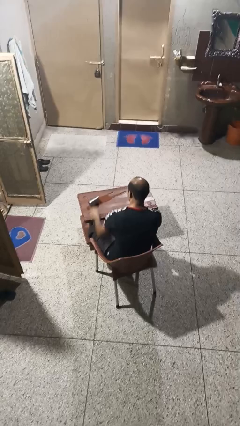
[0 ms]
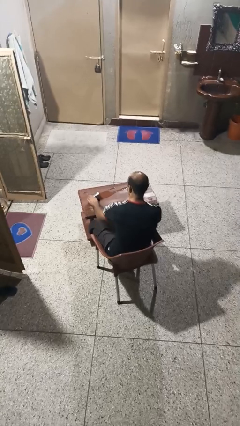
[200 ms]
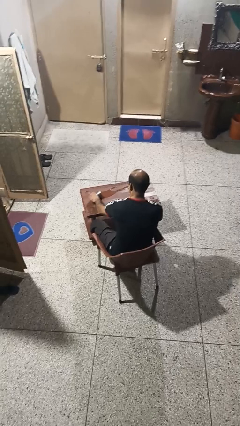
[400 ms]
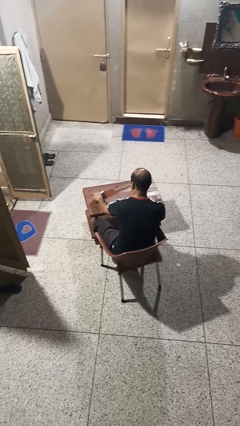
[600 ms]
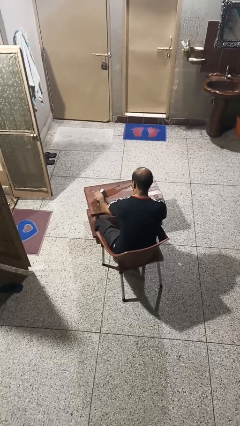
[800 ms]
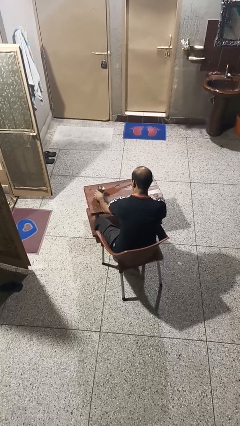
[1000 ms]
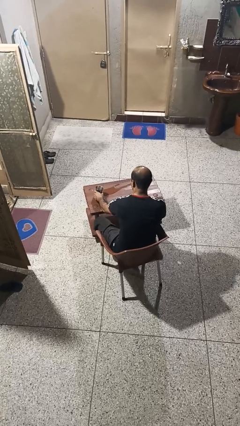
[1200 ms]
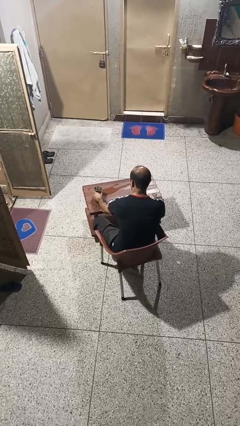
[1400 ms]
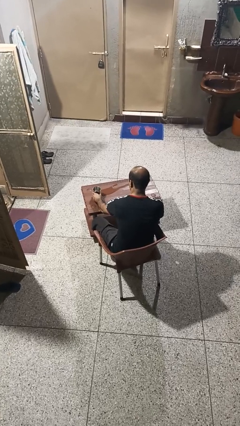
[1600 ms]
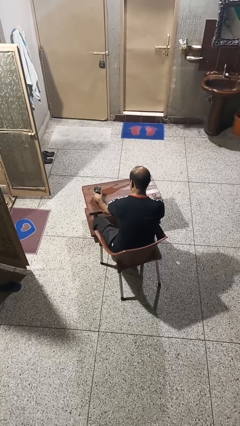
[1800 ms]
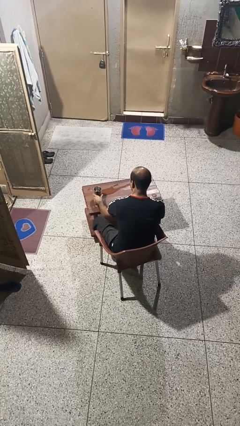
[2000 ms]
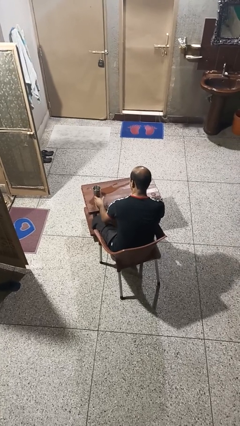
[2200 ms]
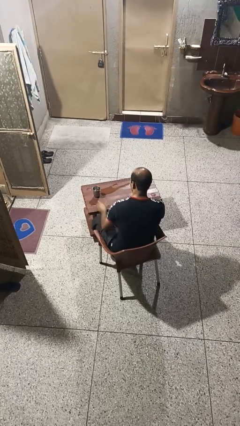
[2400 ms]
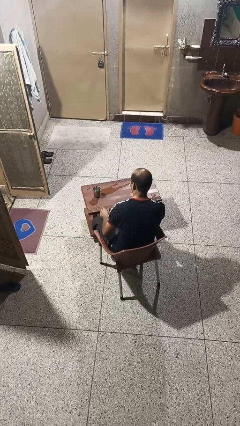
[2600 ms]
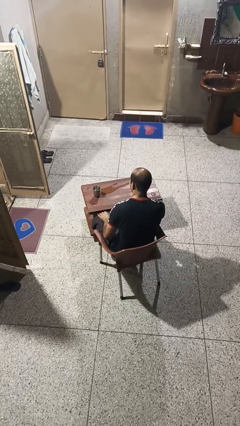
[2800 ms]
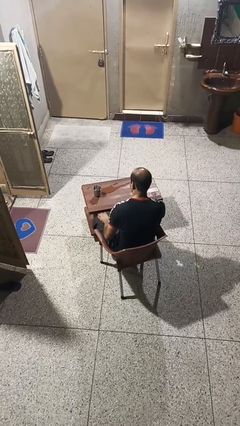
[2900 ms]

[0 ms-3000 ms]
person sets upright glass

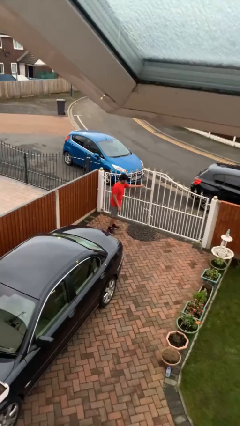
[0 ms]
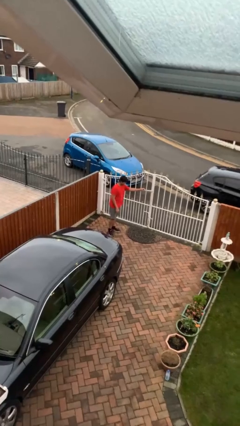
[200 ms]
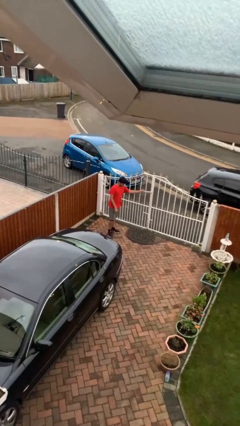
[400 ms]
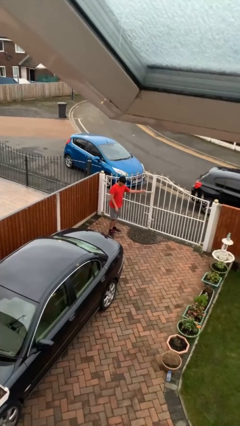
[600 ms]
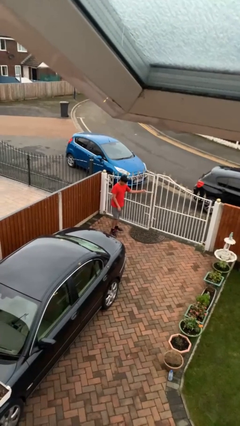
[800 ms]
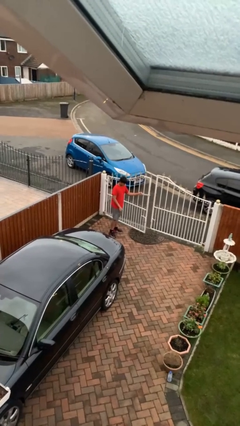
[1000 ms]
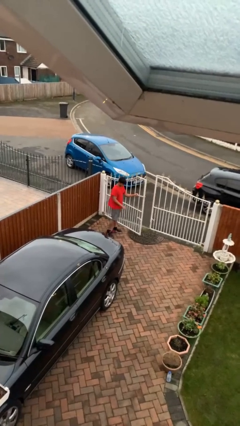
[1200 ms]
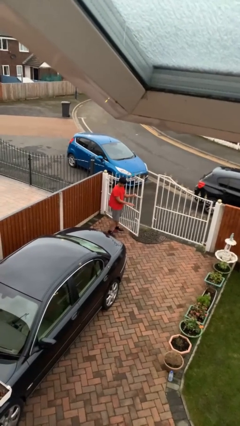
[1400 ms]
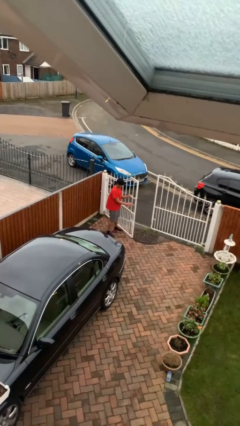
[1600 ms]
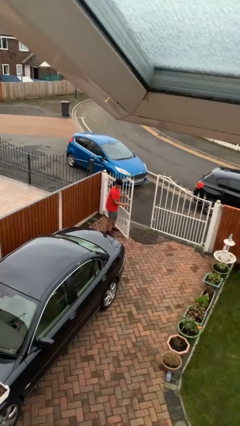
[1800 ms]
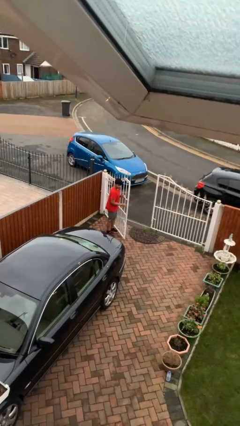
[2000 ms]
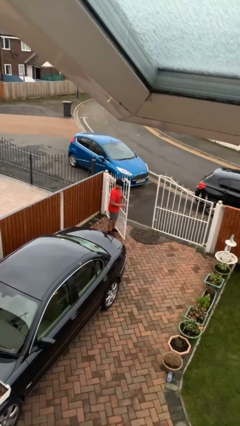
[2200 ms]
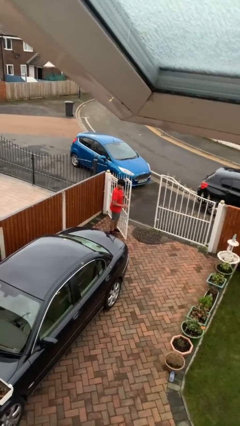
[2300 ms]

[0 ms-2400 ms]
person opens facility door

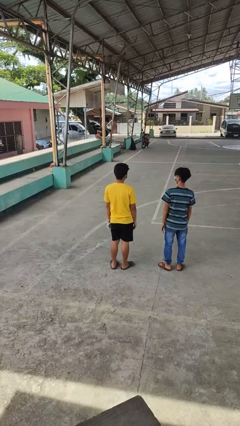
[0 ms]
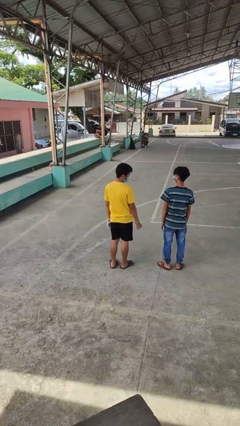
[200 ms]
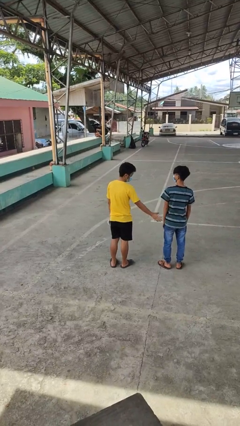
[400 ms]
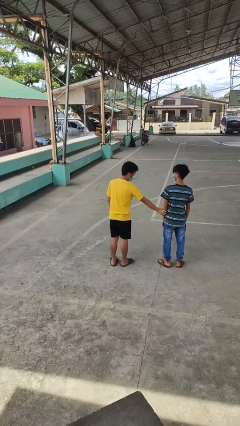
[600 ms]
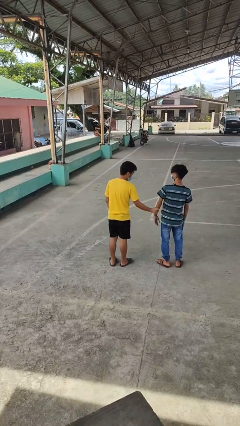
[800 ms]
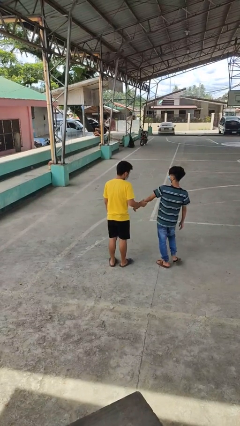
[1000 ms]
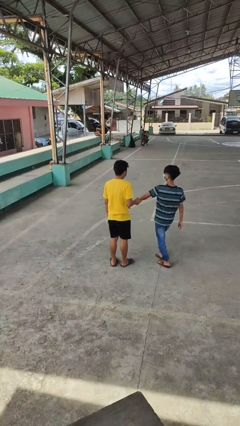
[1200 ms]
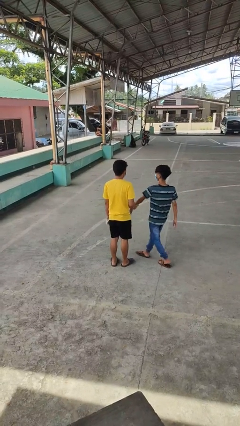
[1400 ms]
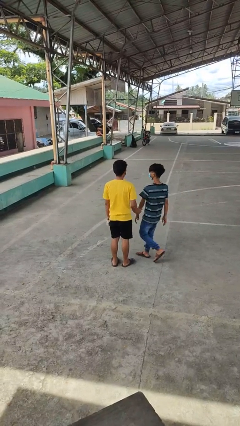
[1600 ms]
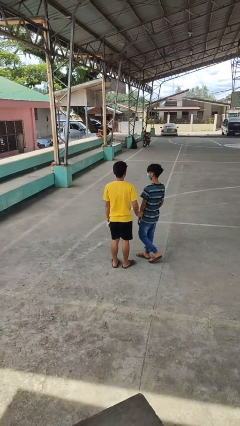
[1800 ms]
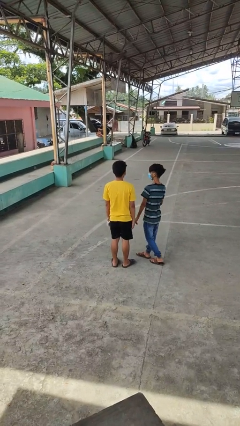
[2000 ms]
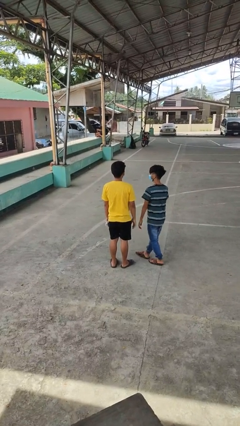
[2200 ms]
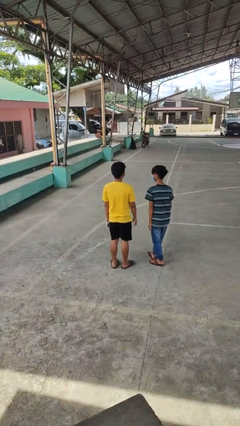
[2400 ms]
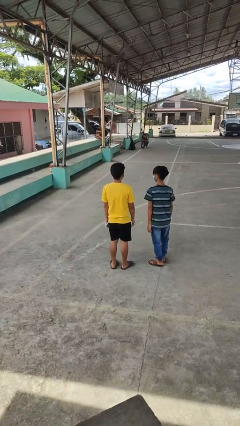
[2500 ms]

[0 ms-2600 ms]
person grabs person by forearm

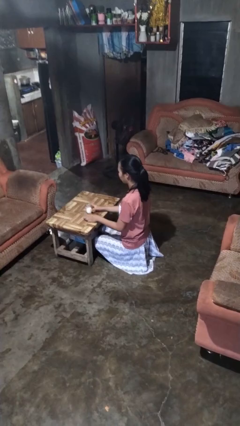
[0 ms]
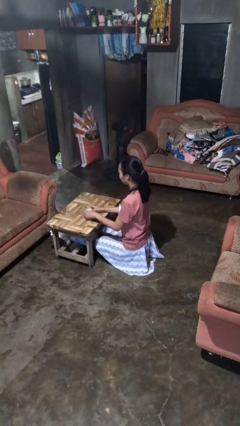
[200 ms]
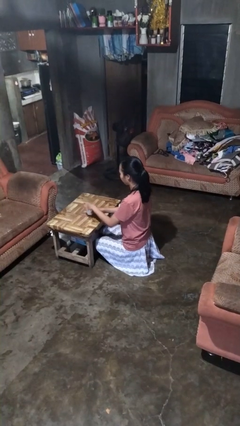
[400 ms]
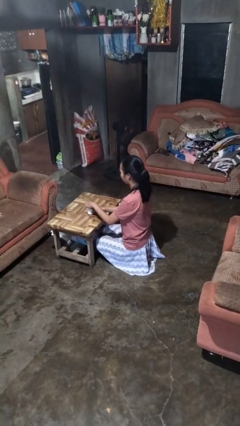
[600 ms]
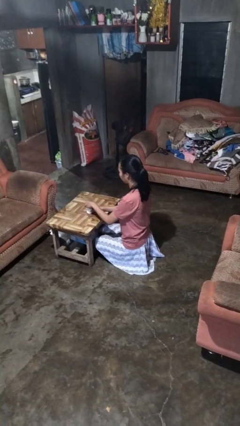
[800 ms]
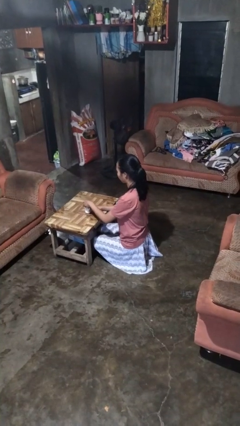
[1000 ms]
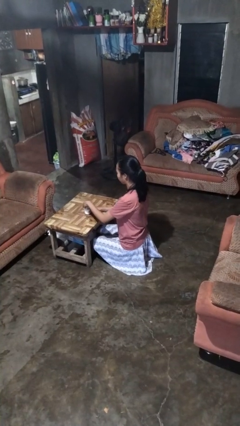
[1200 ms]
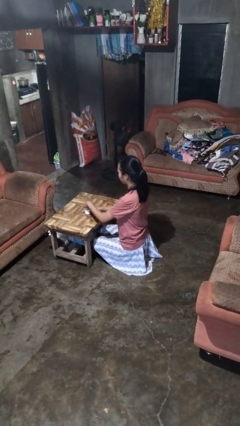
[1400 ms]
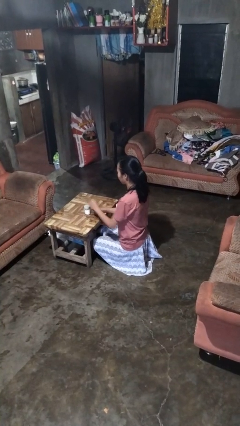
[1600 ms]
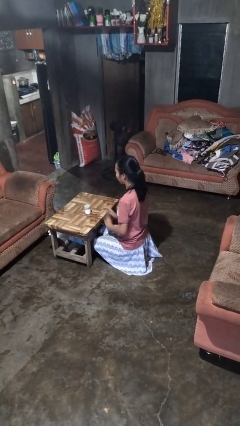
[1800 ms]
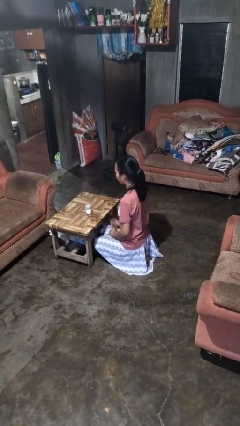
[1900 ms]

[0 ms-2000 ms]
person closes jar

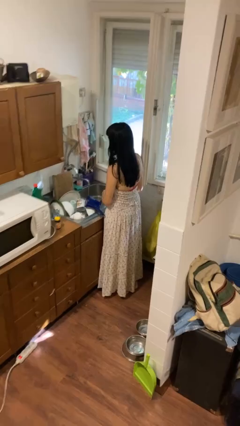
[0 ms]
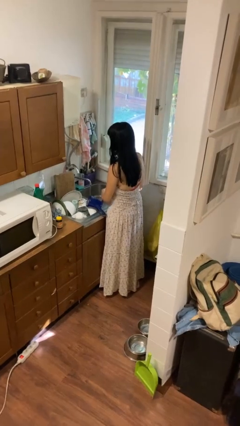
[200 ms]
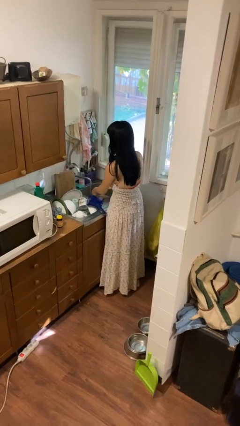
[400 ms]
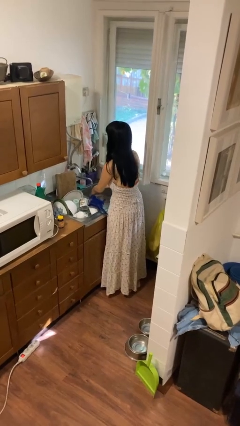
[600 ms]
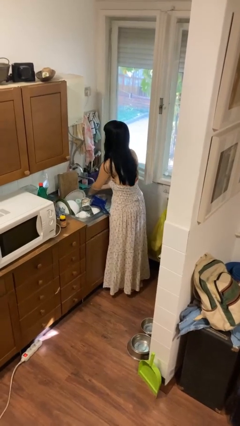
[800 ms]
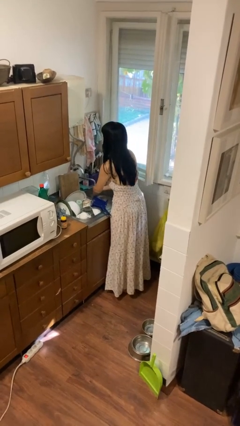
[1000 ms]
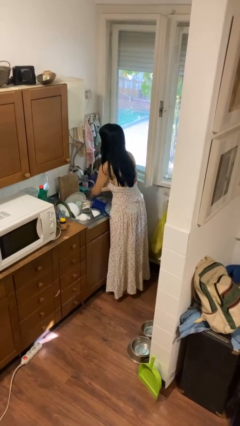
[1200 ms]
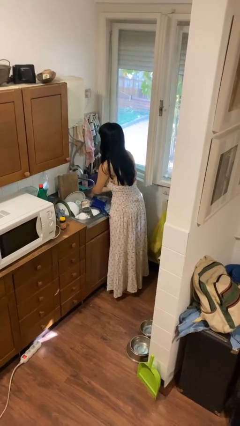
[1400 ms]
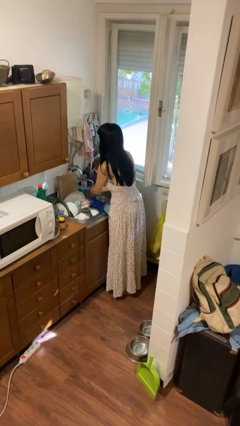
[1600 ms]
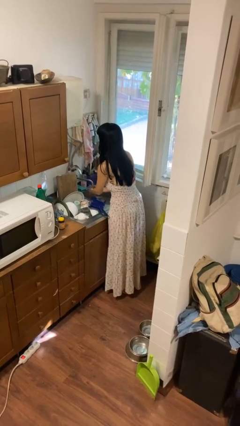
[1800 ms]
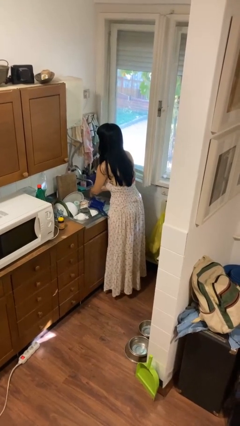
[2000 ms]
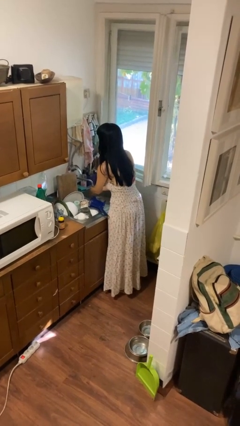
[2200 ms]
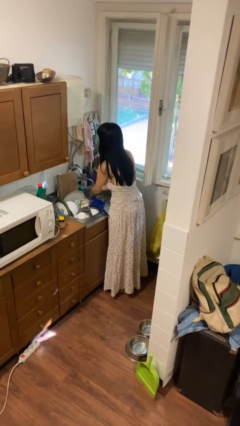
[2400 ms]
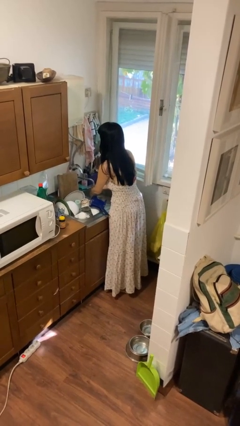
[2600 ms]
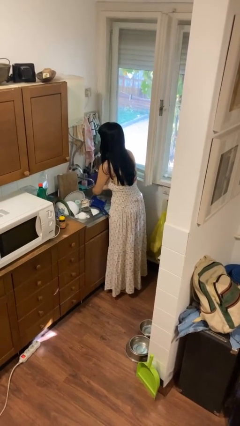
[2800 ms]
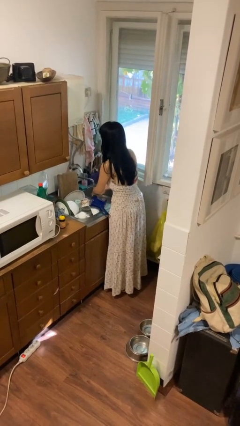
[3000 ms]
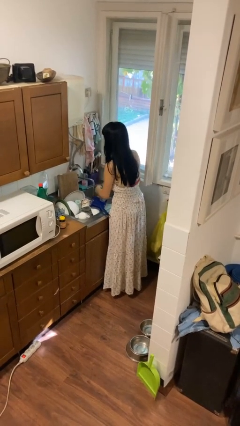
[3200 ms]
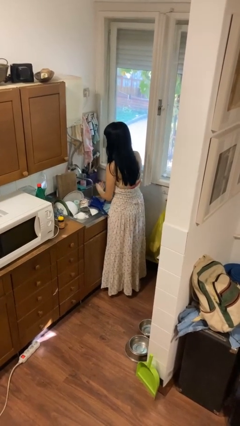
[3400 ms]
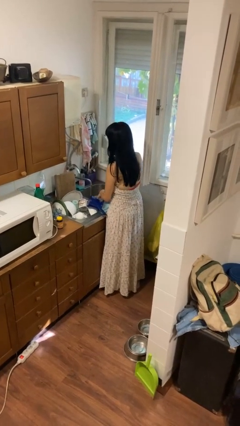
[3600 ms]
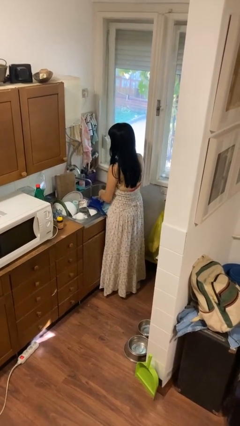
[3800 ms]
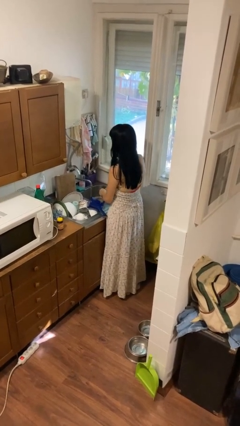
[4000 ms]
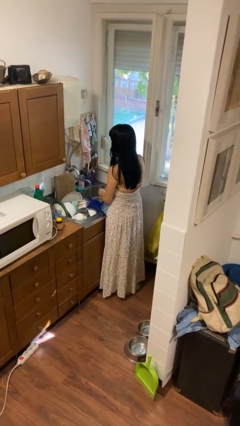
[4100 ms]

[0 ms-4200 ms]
person washes hands

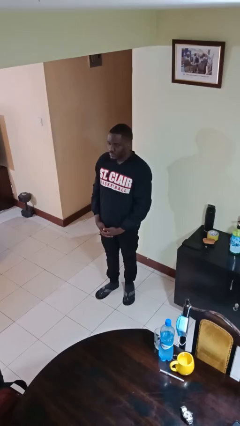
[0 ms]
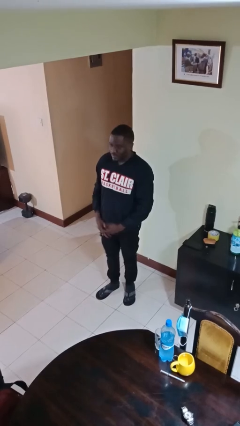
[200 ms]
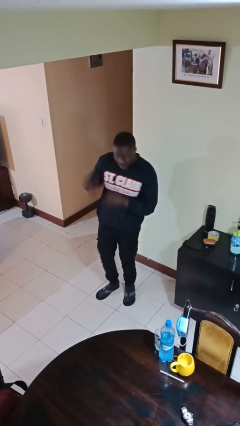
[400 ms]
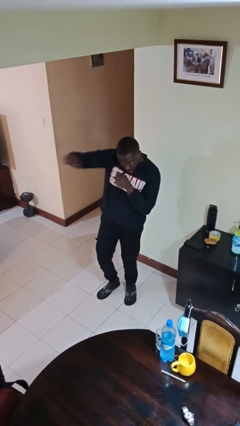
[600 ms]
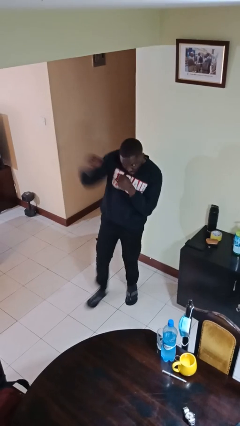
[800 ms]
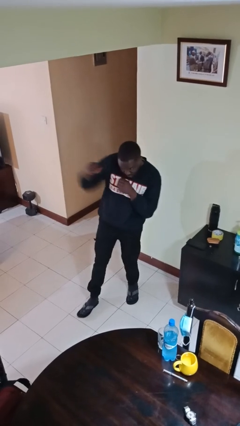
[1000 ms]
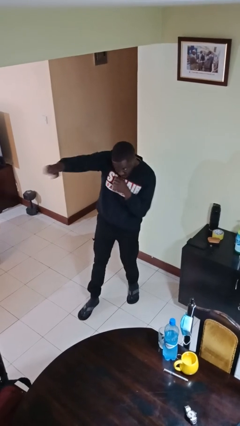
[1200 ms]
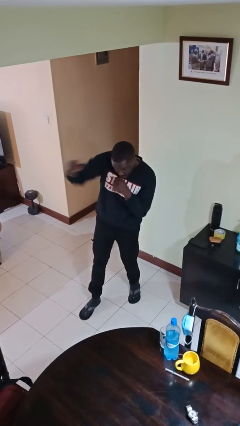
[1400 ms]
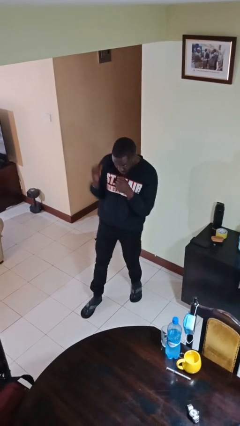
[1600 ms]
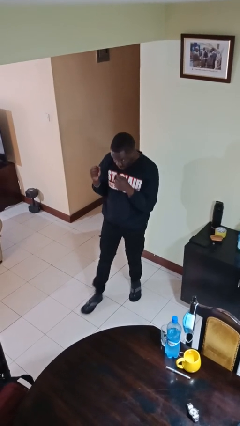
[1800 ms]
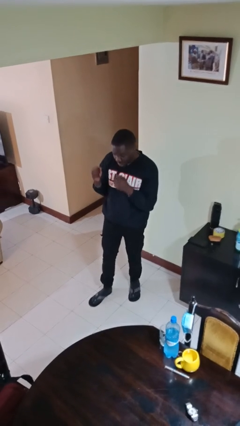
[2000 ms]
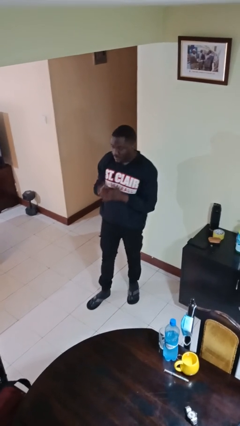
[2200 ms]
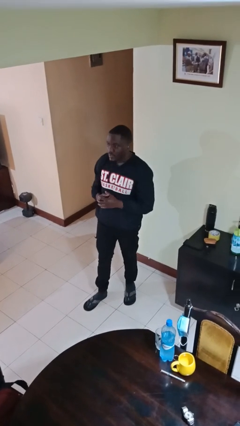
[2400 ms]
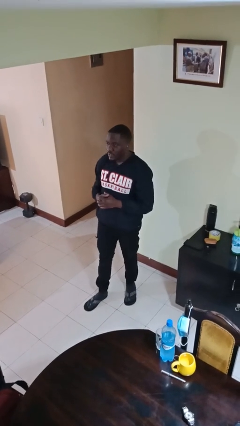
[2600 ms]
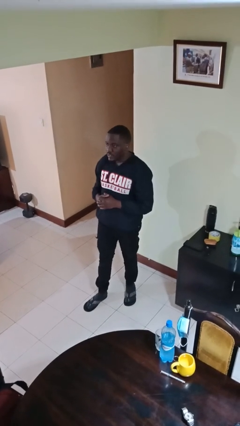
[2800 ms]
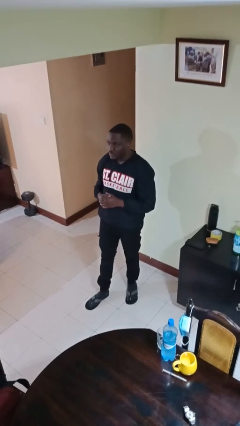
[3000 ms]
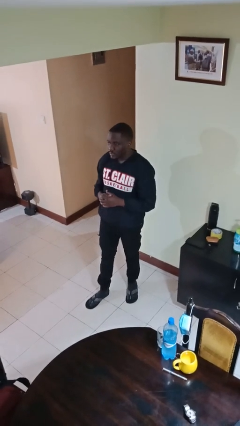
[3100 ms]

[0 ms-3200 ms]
person punches
